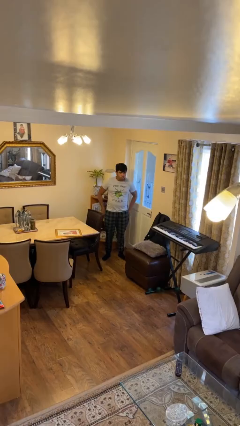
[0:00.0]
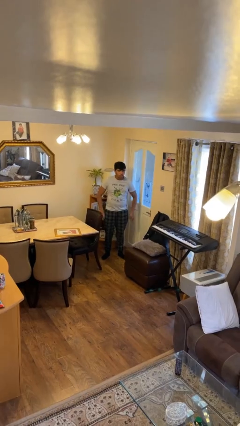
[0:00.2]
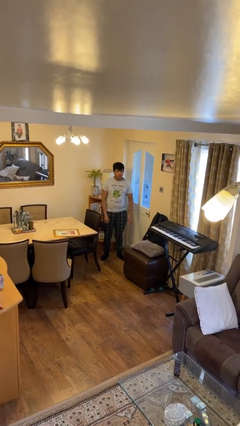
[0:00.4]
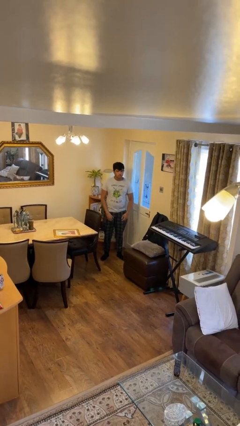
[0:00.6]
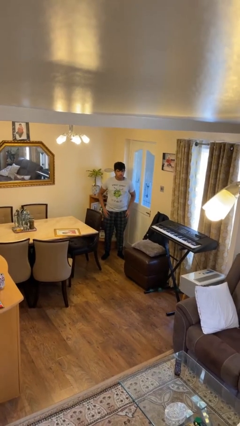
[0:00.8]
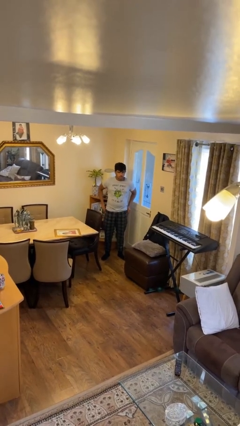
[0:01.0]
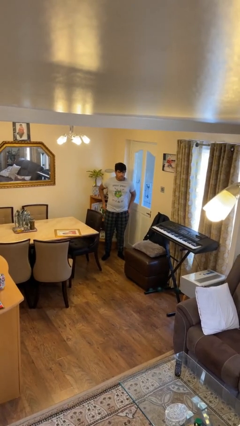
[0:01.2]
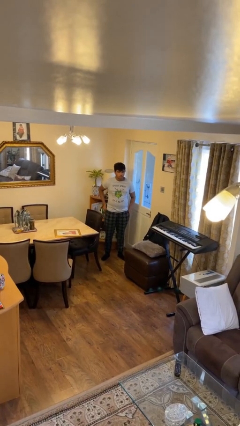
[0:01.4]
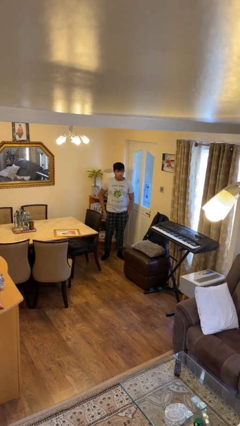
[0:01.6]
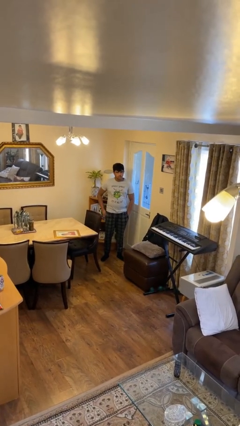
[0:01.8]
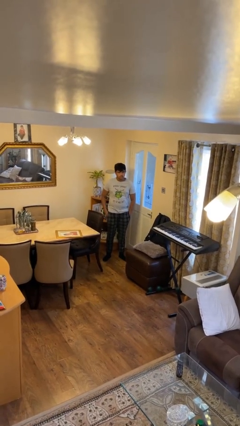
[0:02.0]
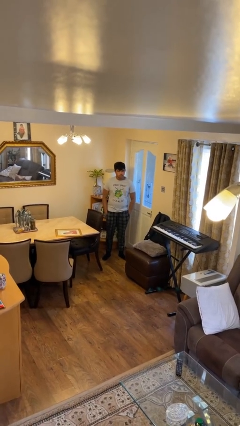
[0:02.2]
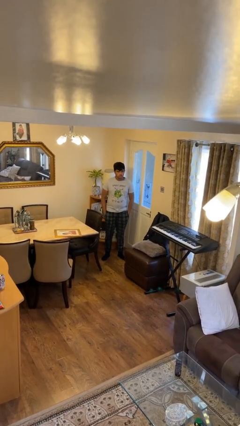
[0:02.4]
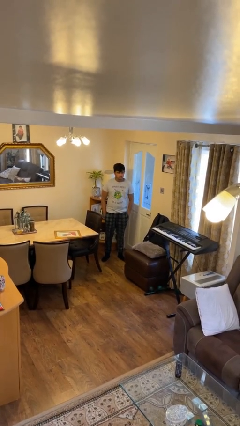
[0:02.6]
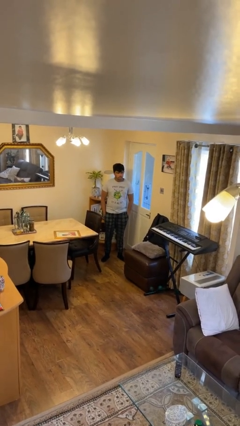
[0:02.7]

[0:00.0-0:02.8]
person puts hands in back pockets

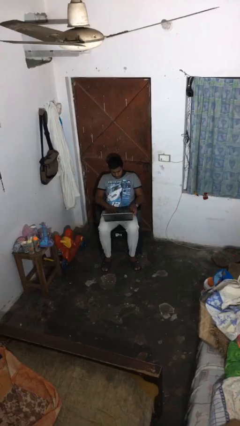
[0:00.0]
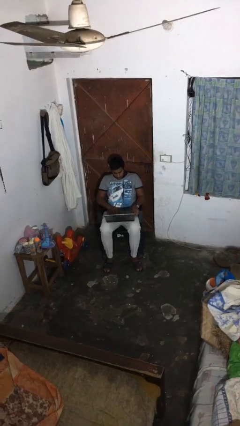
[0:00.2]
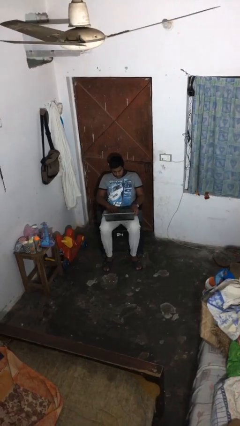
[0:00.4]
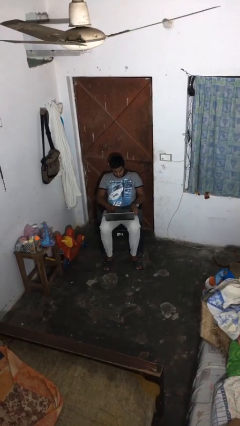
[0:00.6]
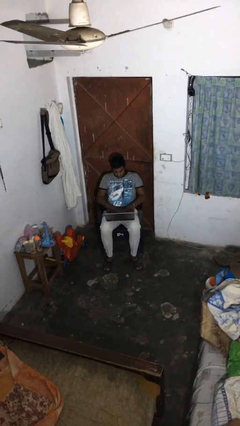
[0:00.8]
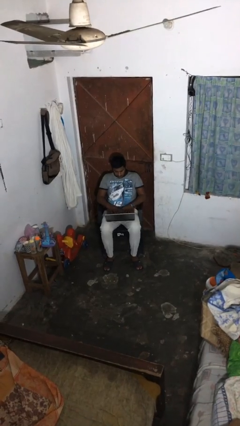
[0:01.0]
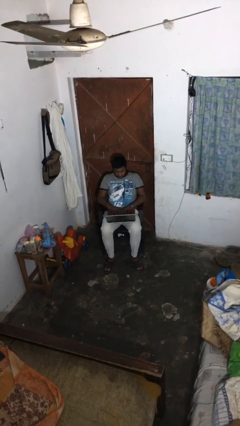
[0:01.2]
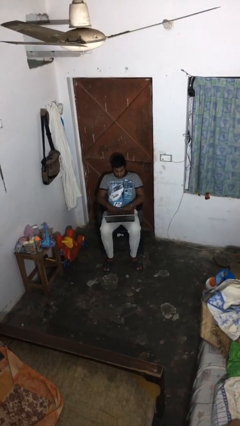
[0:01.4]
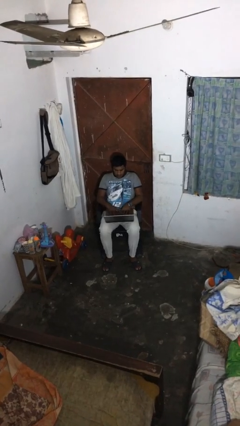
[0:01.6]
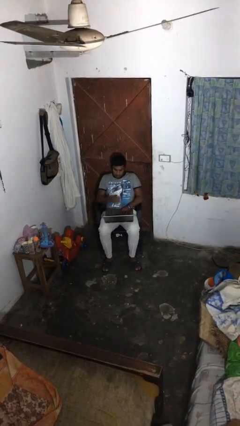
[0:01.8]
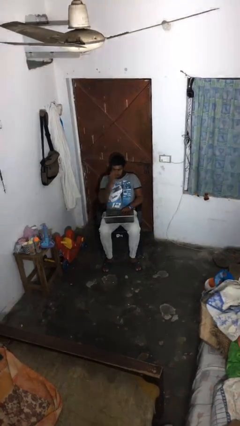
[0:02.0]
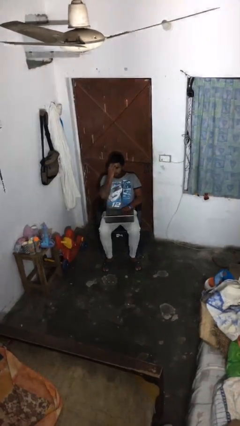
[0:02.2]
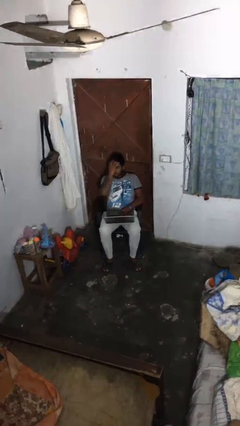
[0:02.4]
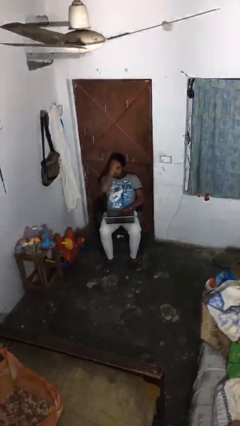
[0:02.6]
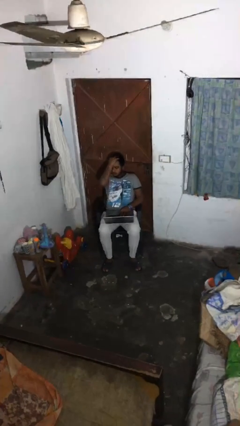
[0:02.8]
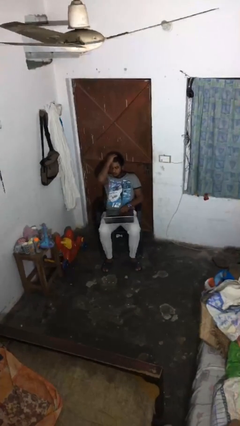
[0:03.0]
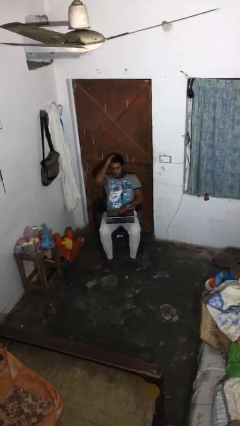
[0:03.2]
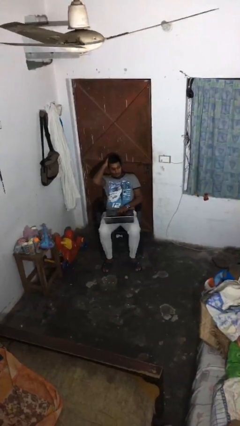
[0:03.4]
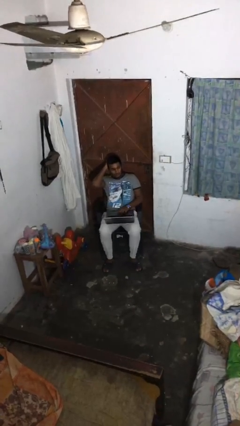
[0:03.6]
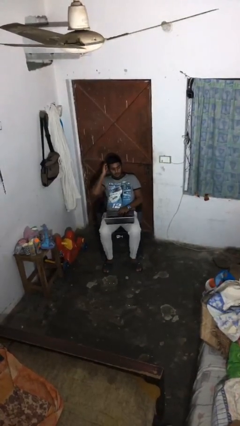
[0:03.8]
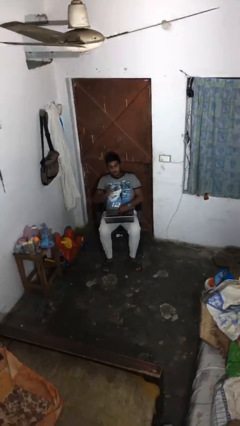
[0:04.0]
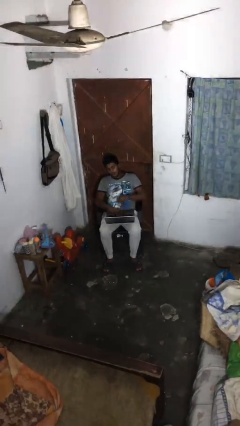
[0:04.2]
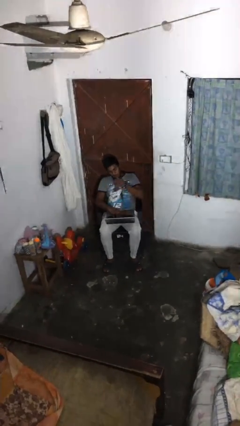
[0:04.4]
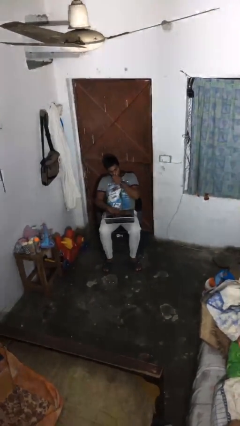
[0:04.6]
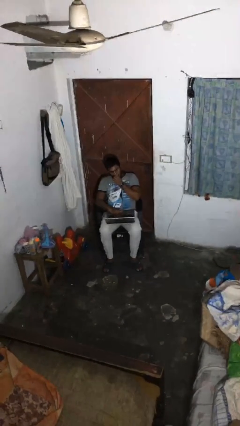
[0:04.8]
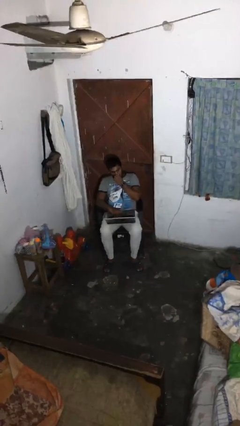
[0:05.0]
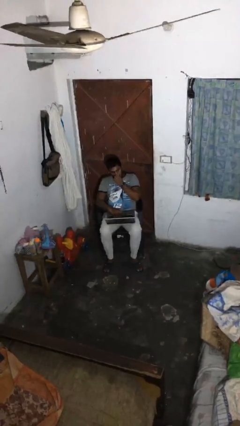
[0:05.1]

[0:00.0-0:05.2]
person interacts with laptop

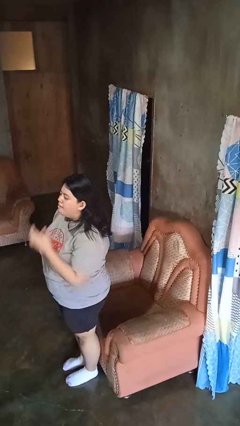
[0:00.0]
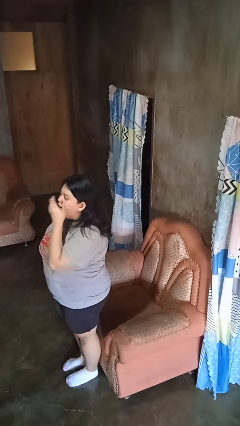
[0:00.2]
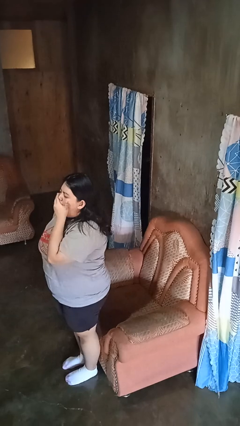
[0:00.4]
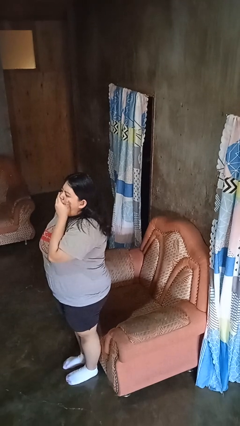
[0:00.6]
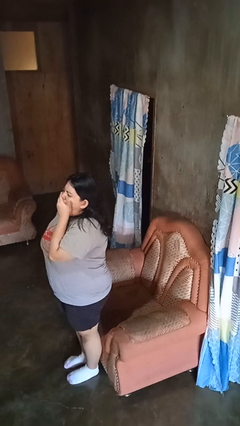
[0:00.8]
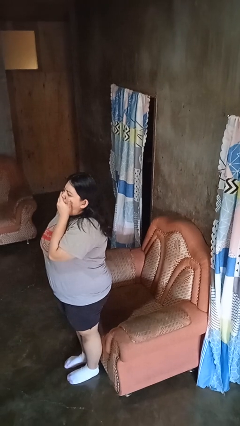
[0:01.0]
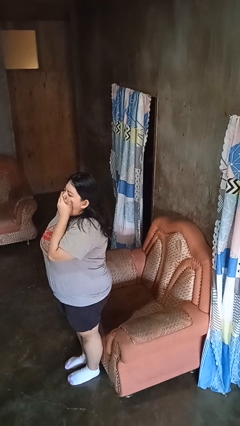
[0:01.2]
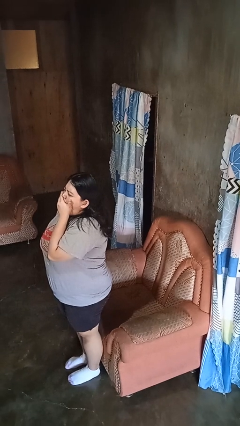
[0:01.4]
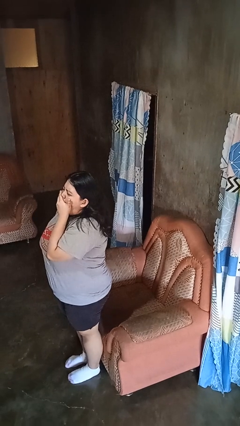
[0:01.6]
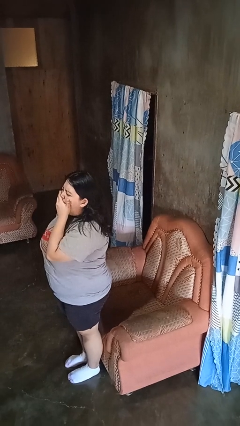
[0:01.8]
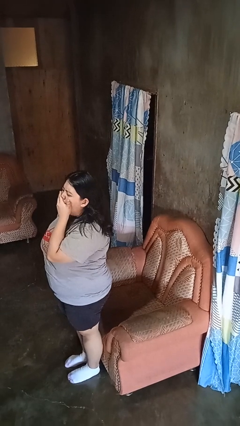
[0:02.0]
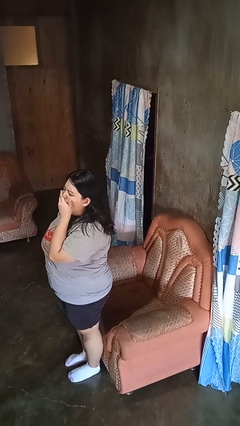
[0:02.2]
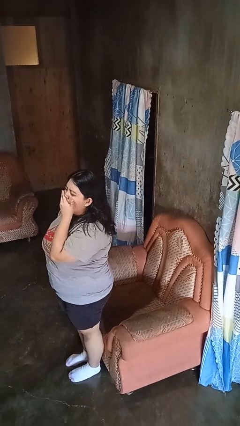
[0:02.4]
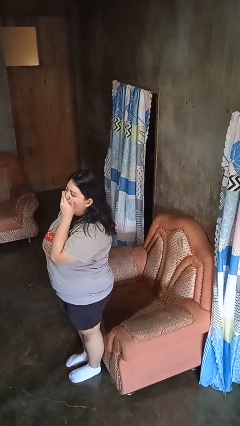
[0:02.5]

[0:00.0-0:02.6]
person yawns

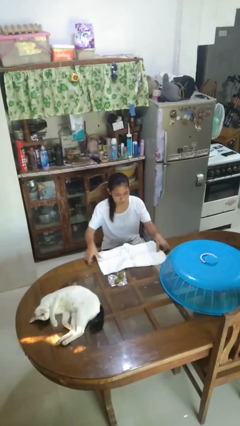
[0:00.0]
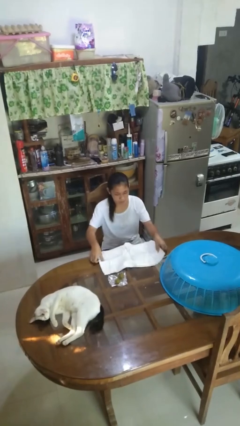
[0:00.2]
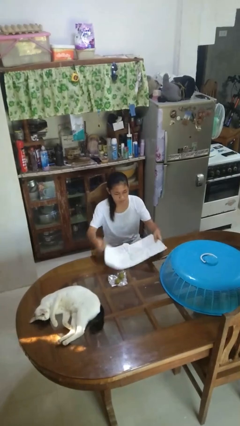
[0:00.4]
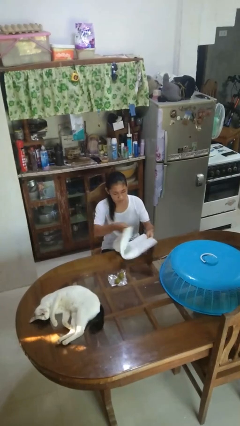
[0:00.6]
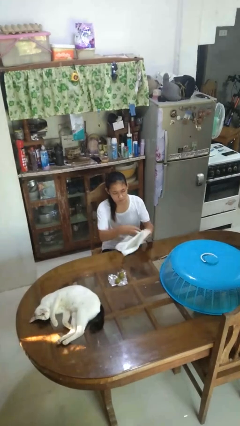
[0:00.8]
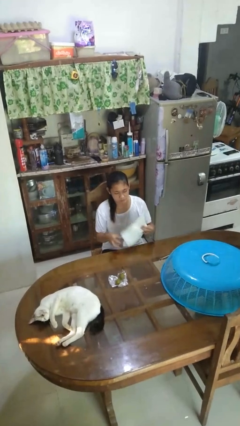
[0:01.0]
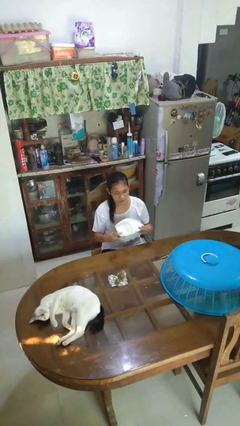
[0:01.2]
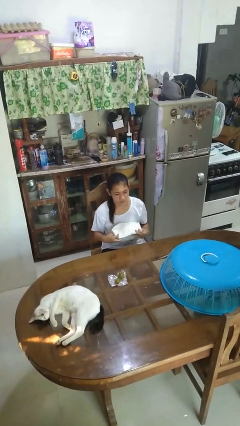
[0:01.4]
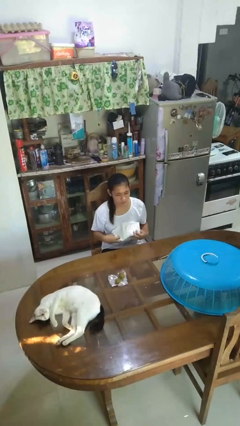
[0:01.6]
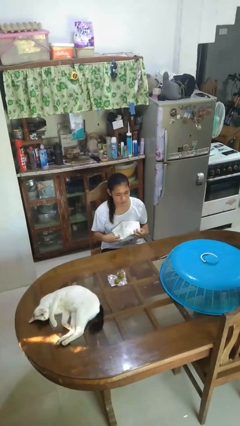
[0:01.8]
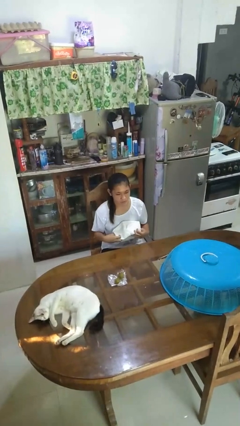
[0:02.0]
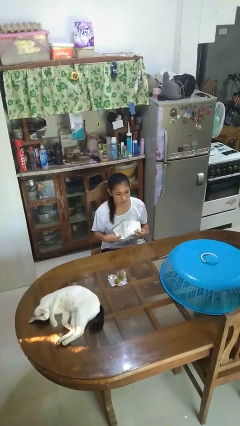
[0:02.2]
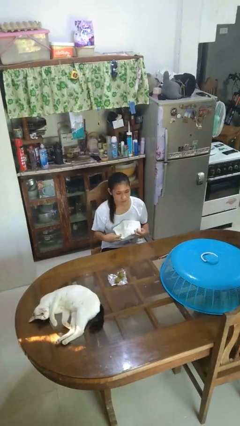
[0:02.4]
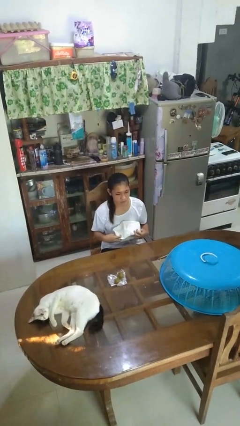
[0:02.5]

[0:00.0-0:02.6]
person folds tablecloth

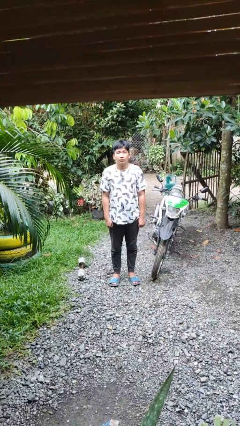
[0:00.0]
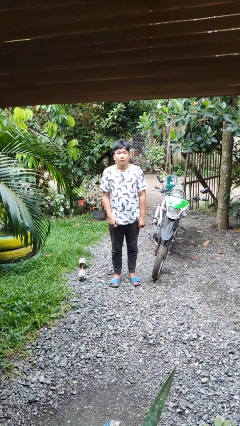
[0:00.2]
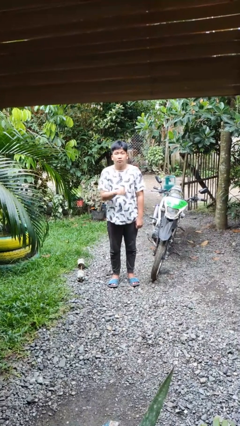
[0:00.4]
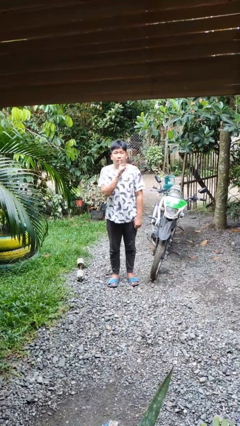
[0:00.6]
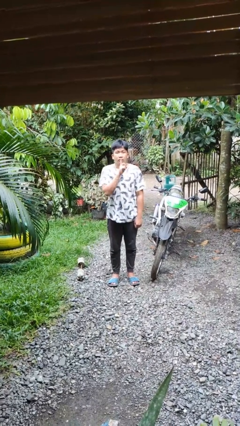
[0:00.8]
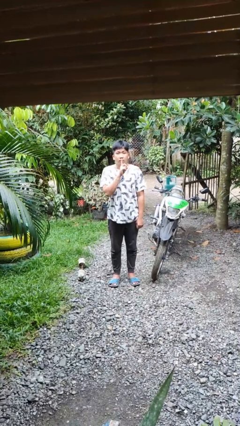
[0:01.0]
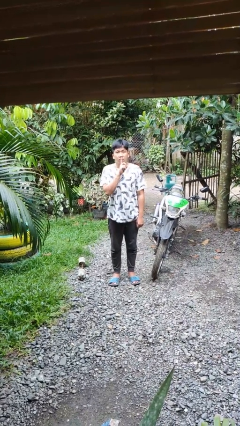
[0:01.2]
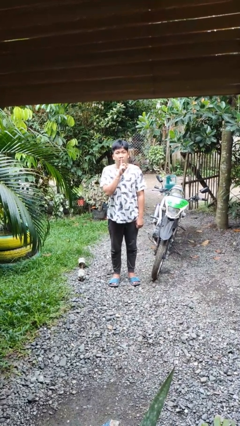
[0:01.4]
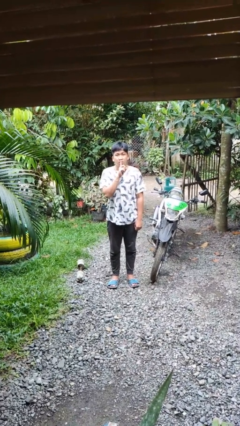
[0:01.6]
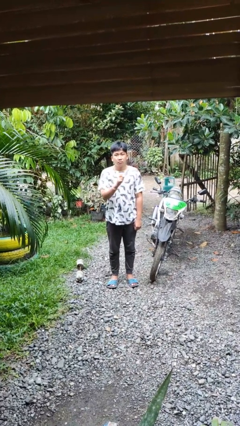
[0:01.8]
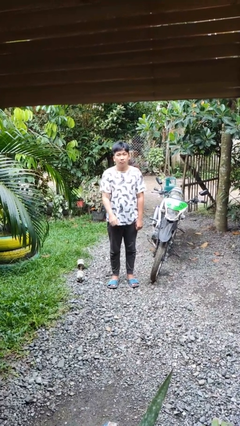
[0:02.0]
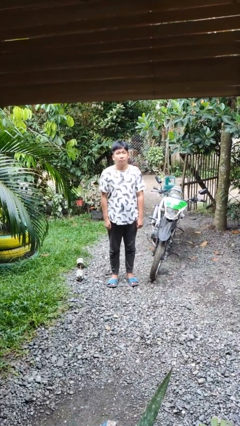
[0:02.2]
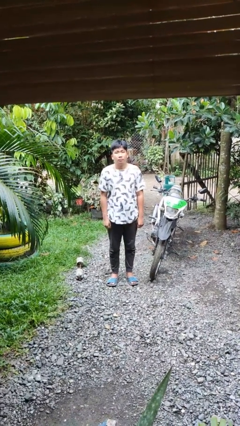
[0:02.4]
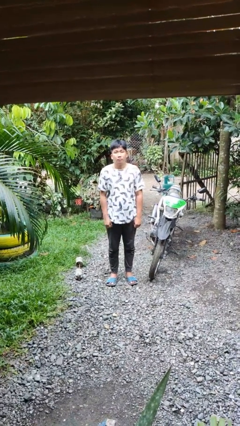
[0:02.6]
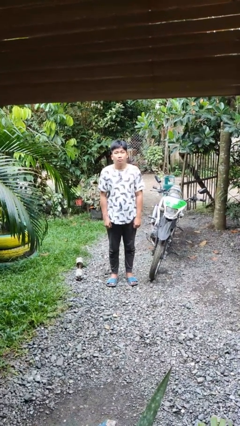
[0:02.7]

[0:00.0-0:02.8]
person gestures be quiet

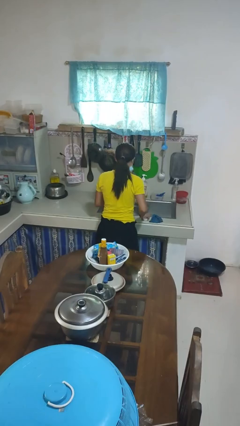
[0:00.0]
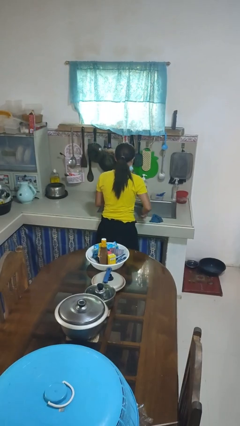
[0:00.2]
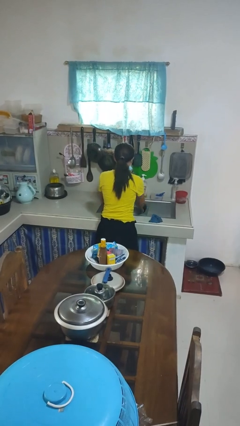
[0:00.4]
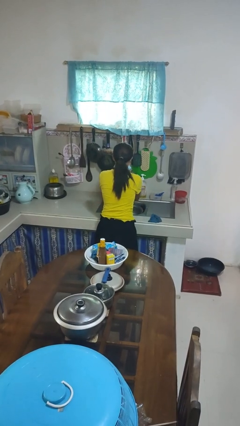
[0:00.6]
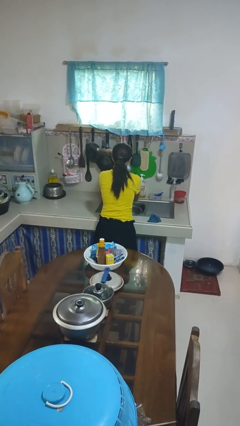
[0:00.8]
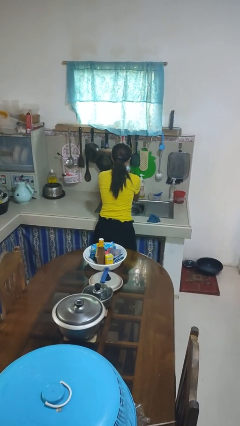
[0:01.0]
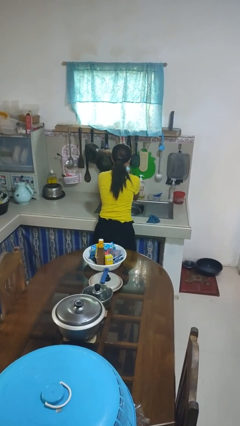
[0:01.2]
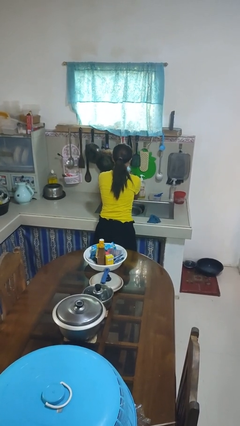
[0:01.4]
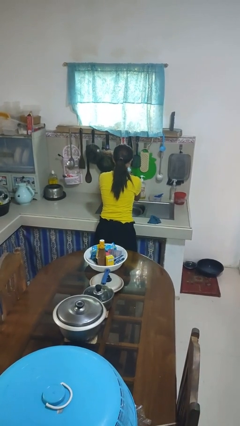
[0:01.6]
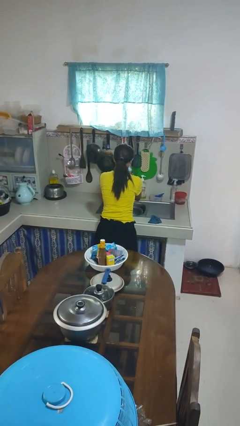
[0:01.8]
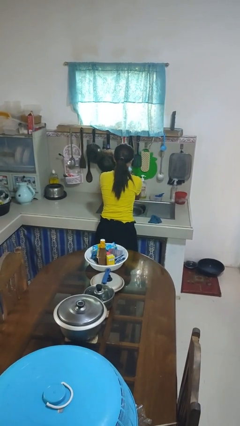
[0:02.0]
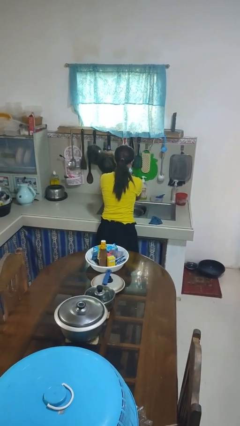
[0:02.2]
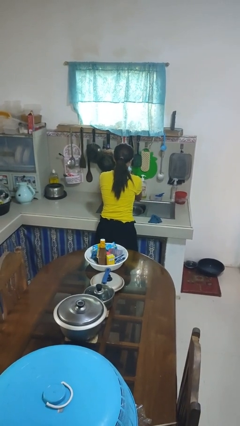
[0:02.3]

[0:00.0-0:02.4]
person washes hands
